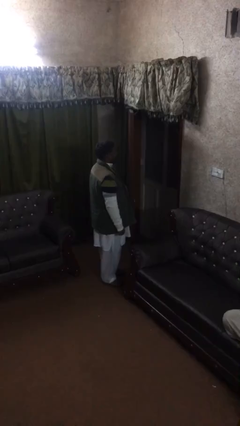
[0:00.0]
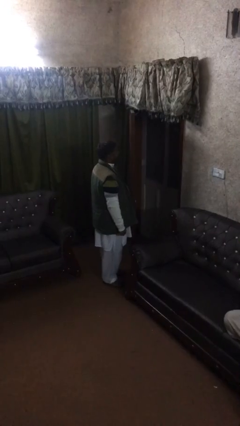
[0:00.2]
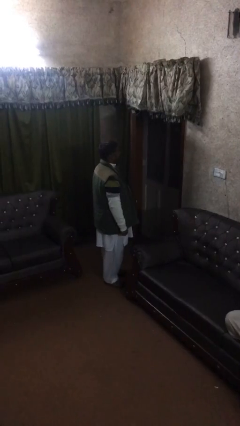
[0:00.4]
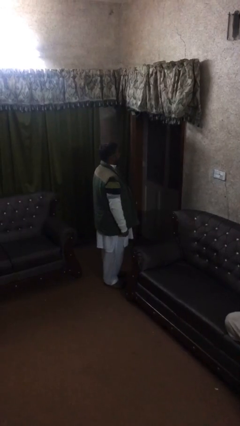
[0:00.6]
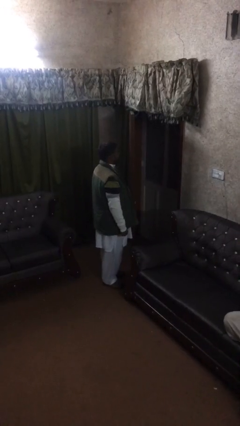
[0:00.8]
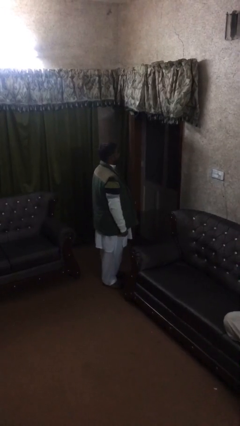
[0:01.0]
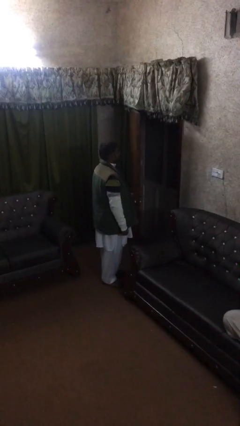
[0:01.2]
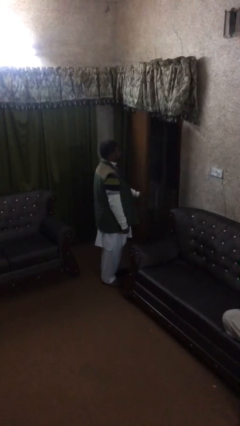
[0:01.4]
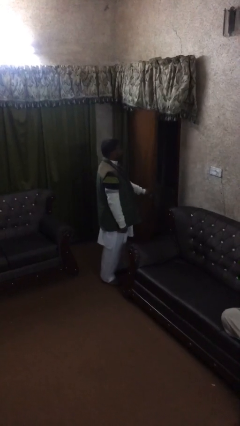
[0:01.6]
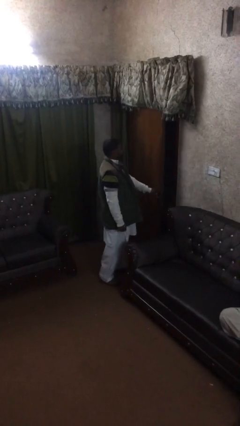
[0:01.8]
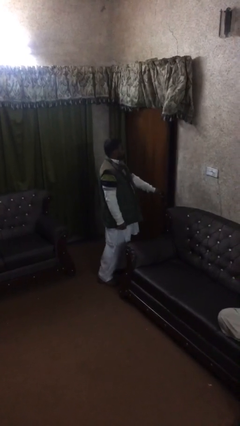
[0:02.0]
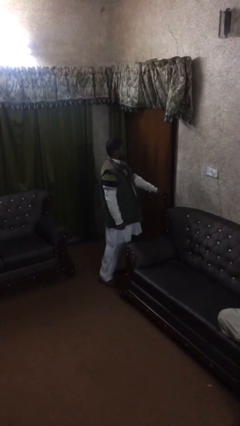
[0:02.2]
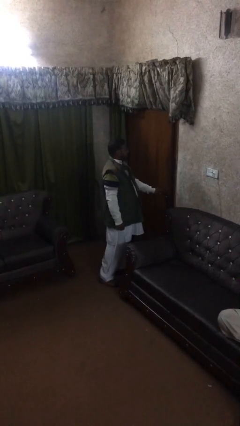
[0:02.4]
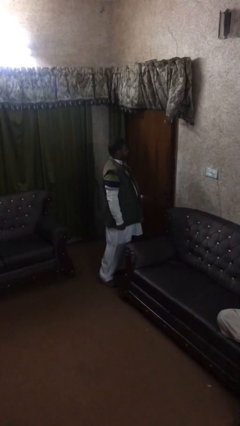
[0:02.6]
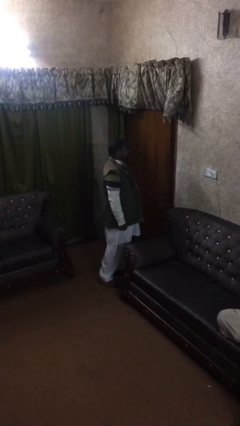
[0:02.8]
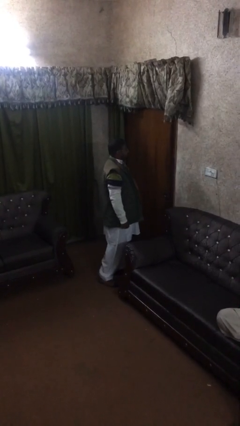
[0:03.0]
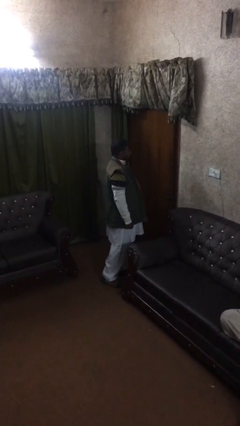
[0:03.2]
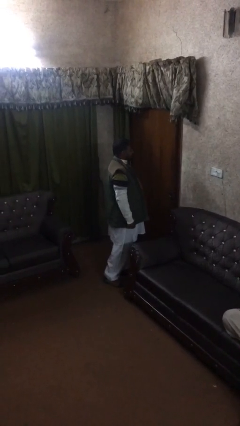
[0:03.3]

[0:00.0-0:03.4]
person closes facility door

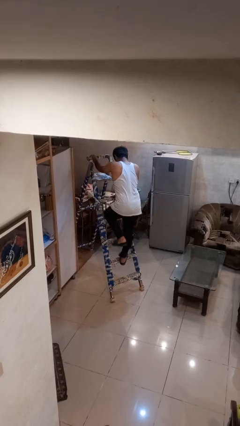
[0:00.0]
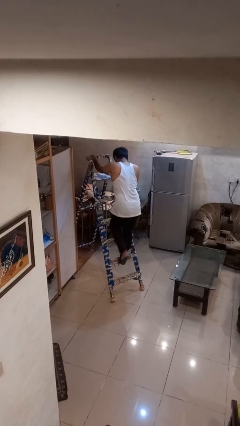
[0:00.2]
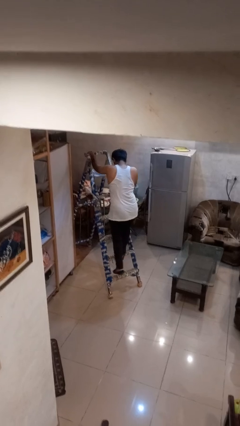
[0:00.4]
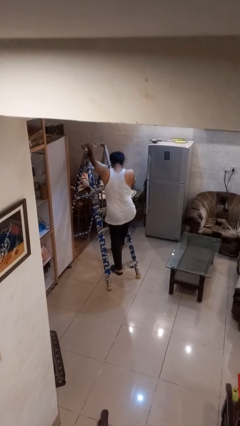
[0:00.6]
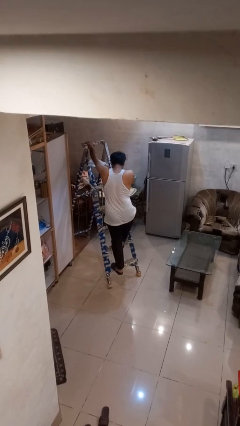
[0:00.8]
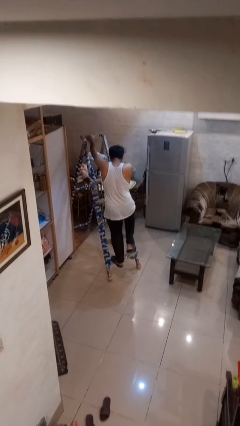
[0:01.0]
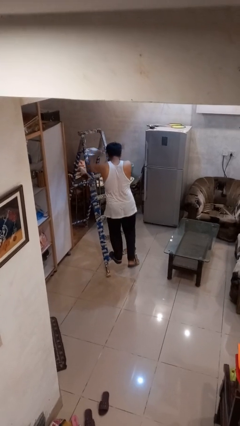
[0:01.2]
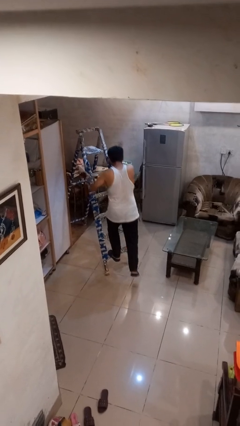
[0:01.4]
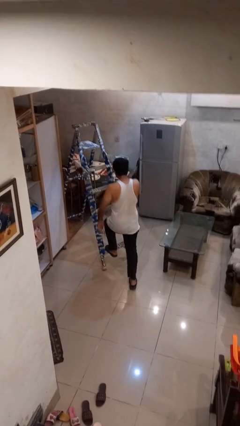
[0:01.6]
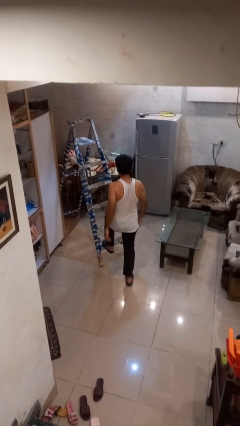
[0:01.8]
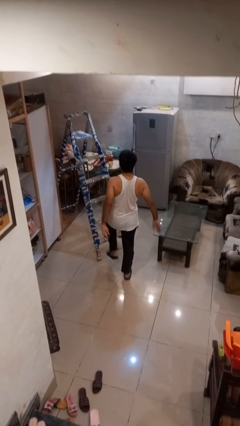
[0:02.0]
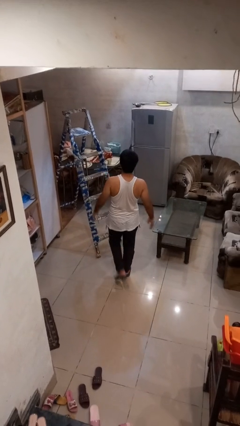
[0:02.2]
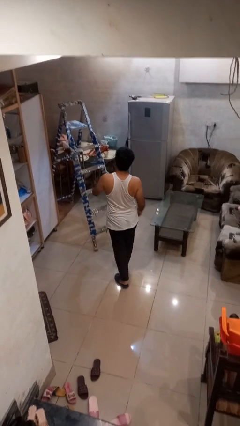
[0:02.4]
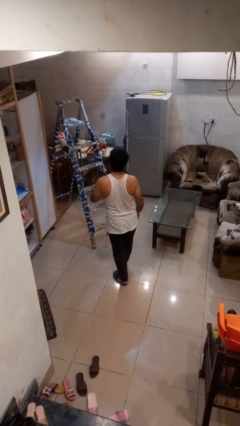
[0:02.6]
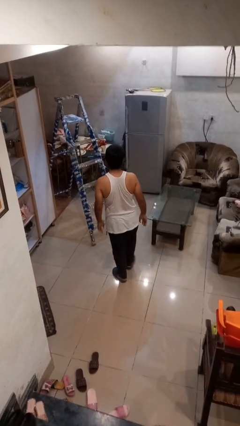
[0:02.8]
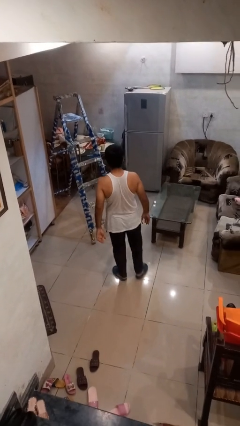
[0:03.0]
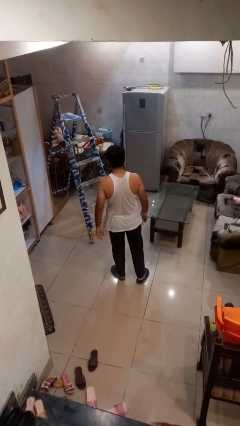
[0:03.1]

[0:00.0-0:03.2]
person climbs down ladder

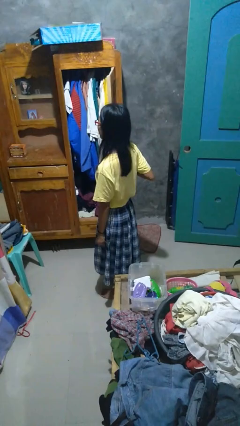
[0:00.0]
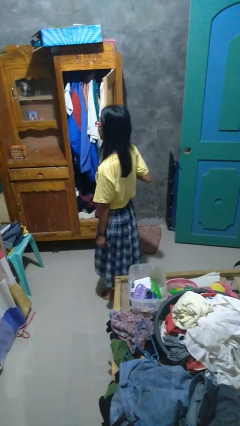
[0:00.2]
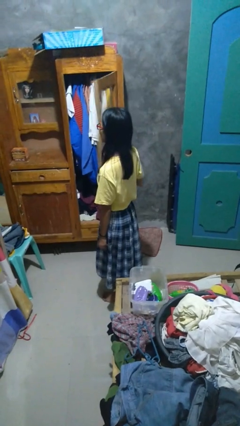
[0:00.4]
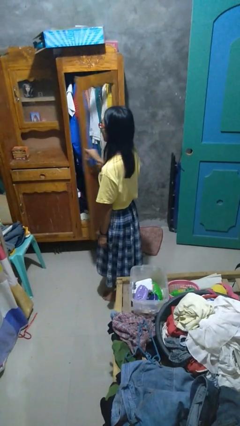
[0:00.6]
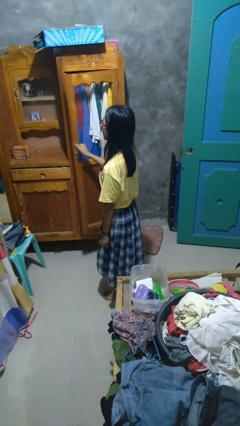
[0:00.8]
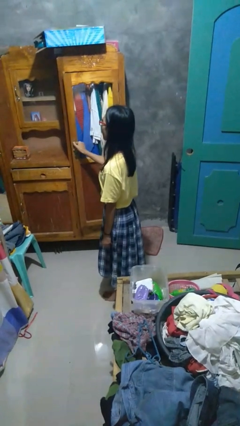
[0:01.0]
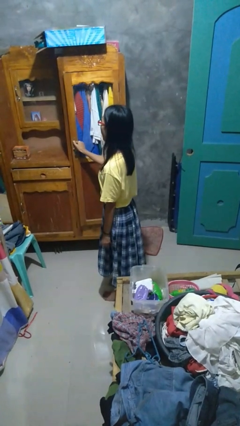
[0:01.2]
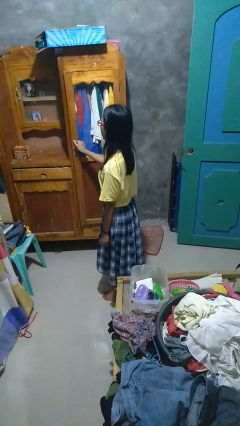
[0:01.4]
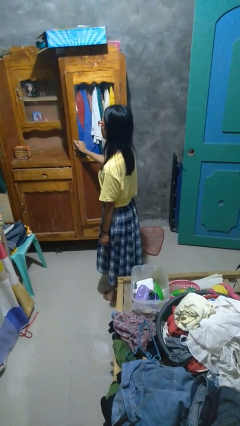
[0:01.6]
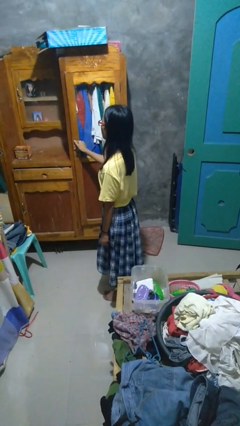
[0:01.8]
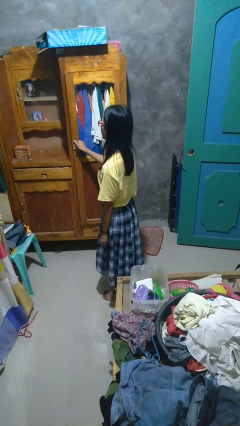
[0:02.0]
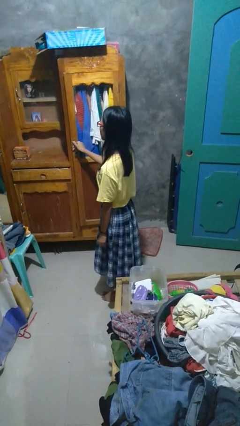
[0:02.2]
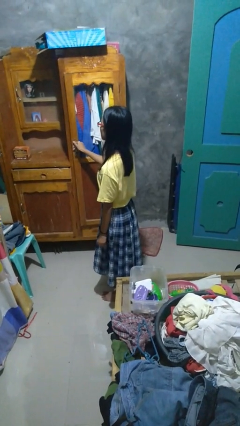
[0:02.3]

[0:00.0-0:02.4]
person closes closet door

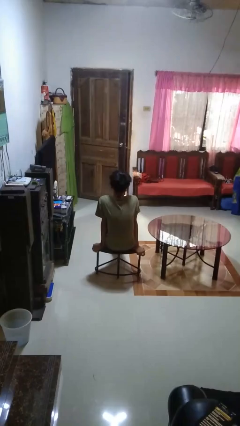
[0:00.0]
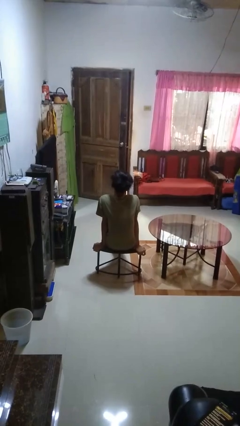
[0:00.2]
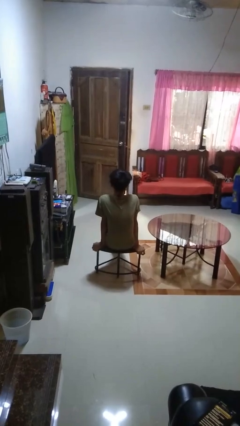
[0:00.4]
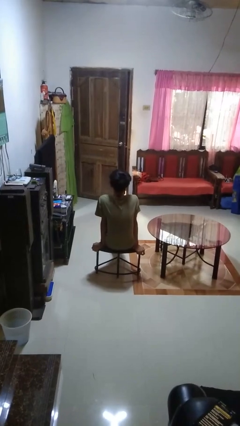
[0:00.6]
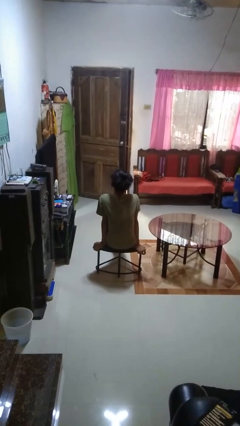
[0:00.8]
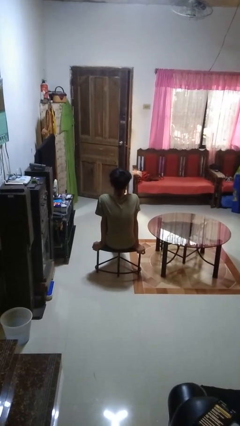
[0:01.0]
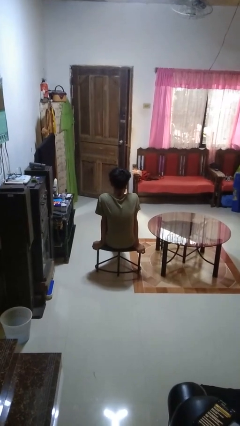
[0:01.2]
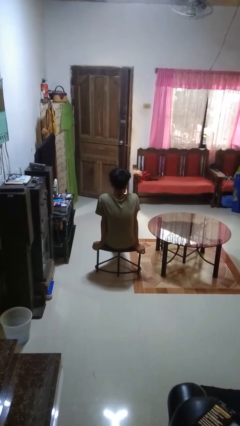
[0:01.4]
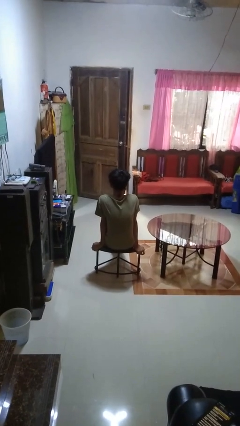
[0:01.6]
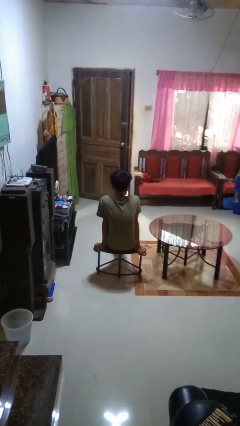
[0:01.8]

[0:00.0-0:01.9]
person nods head

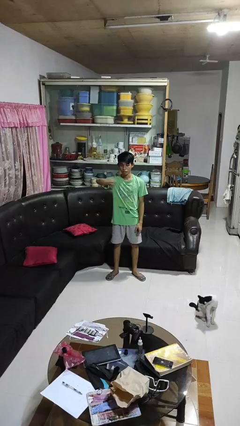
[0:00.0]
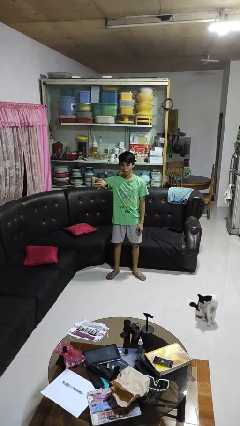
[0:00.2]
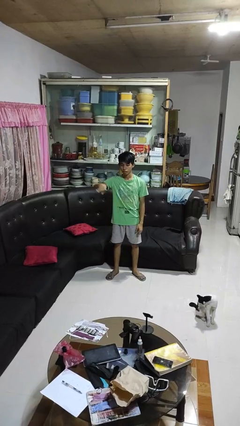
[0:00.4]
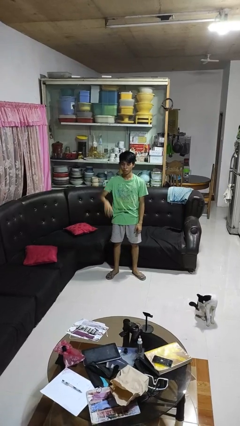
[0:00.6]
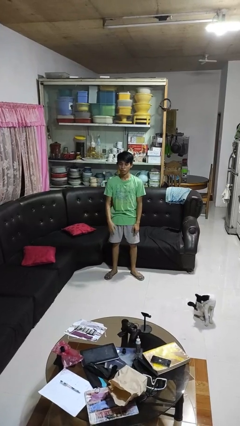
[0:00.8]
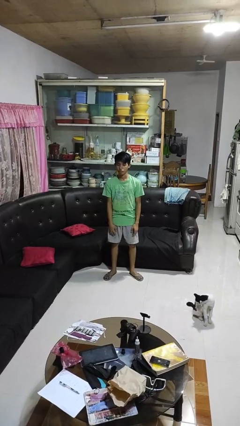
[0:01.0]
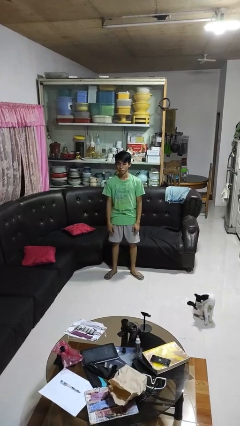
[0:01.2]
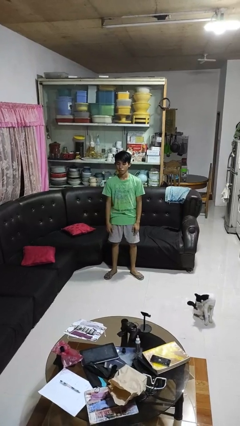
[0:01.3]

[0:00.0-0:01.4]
person gestures swipe right

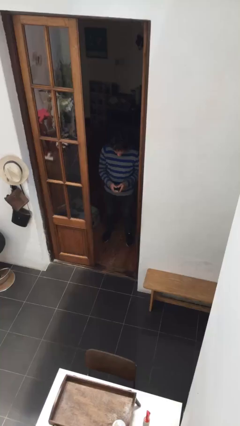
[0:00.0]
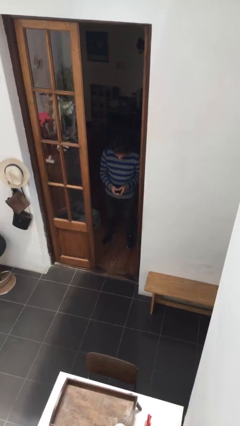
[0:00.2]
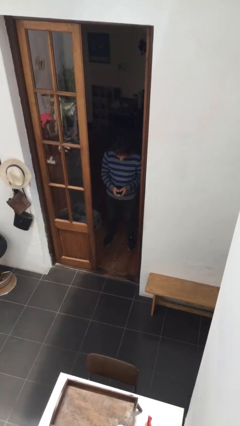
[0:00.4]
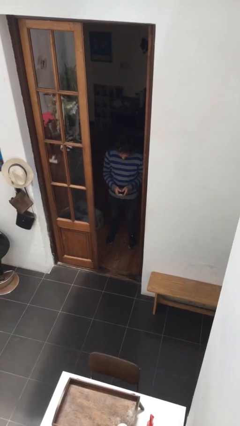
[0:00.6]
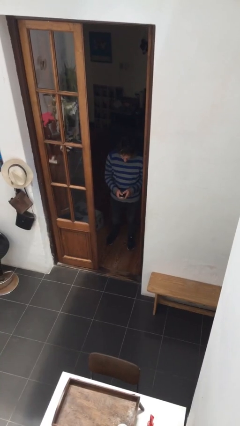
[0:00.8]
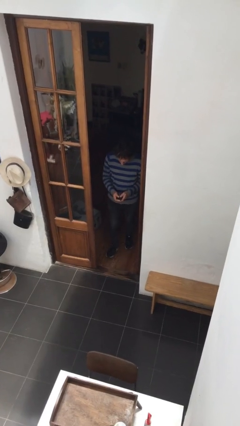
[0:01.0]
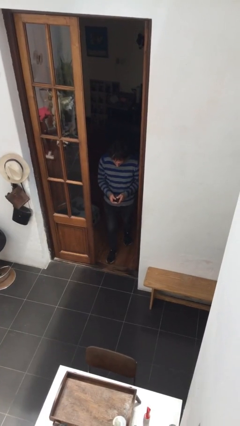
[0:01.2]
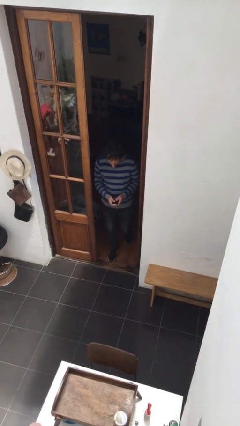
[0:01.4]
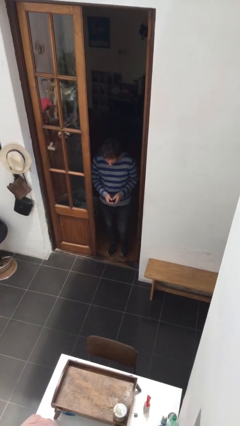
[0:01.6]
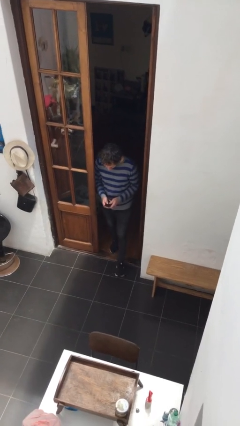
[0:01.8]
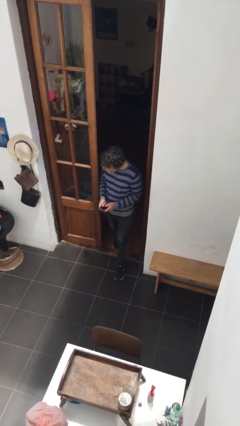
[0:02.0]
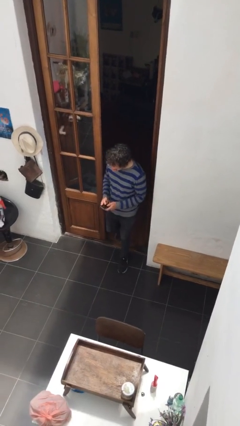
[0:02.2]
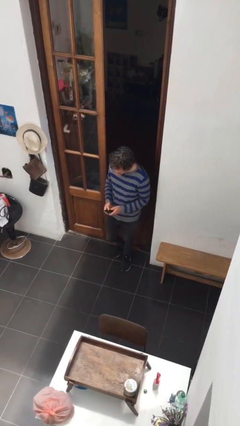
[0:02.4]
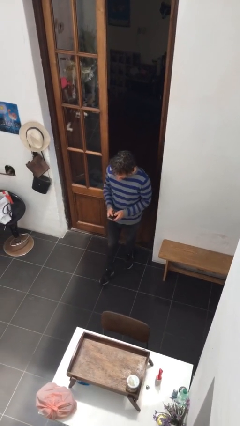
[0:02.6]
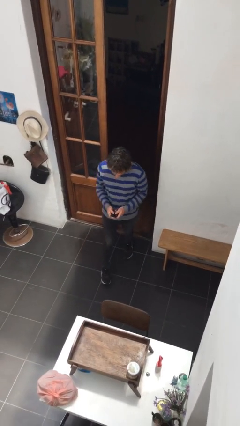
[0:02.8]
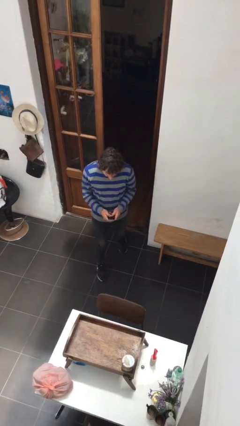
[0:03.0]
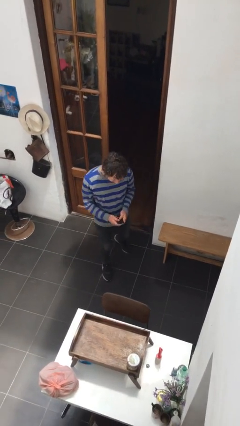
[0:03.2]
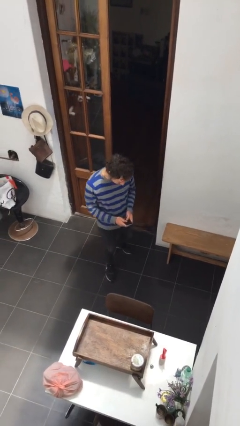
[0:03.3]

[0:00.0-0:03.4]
person enters scene through structure

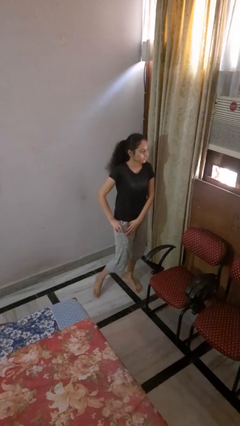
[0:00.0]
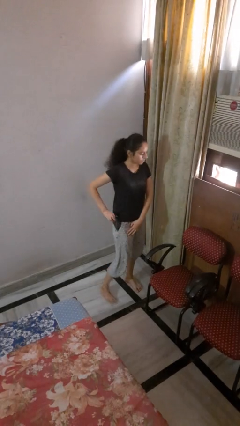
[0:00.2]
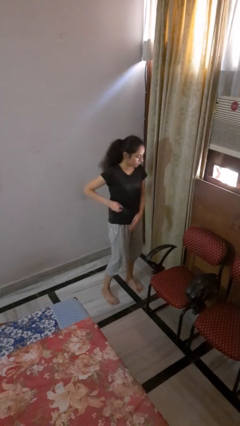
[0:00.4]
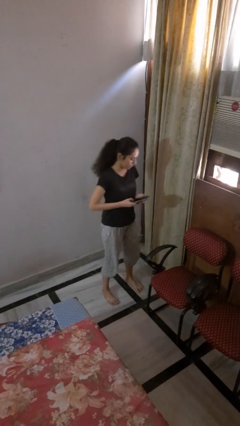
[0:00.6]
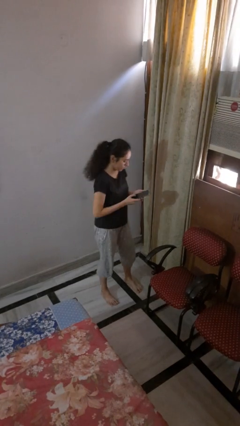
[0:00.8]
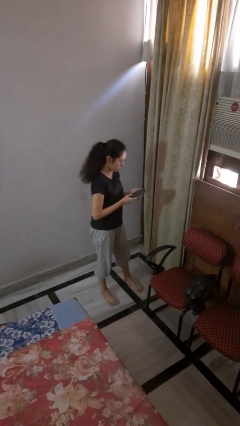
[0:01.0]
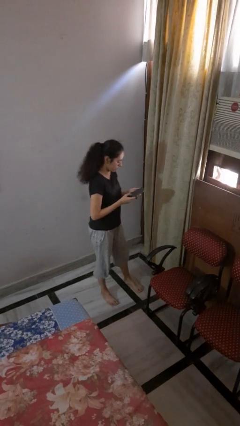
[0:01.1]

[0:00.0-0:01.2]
person takes phone from pocket

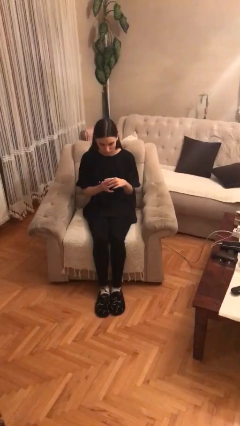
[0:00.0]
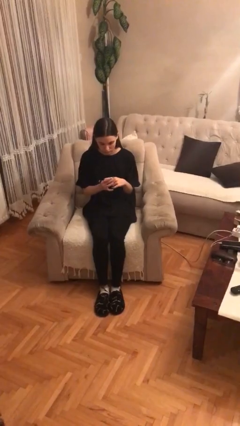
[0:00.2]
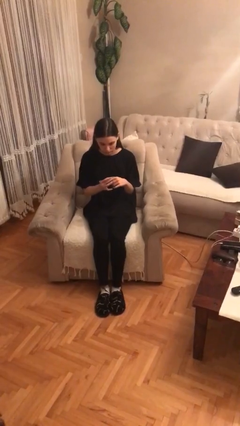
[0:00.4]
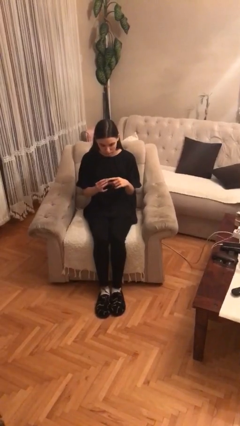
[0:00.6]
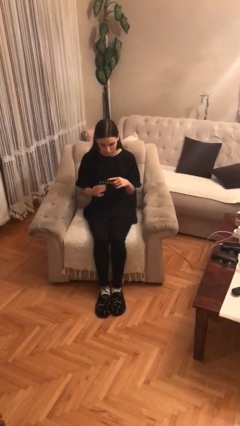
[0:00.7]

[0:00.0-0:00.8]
person takes off ring
